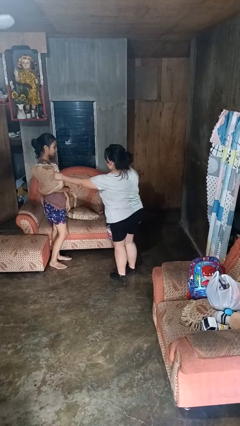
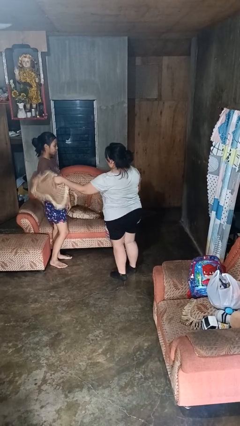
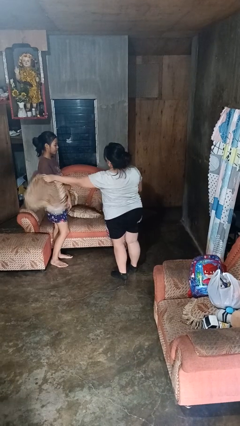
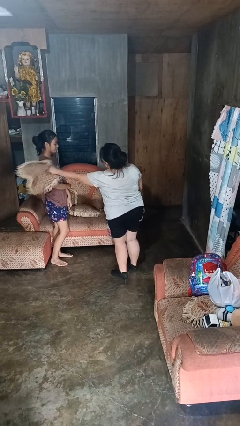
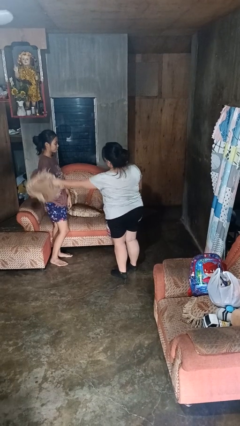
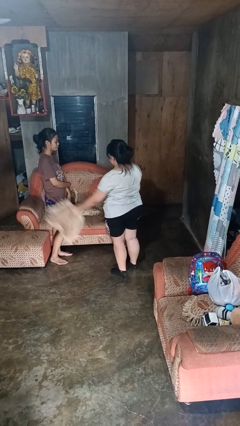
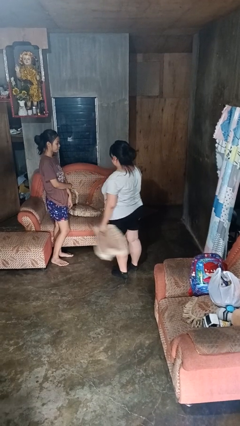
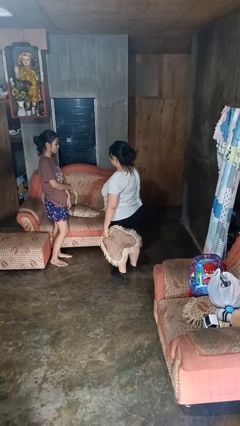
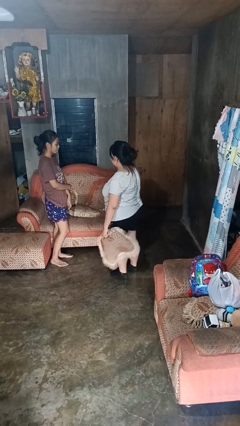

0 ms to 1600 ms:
person hits person with pillow

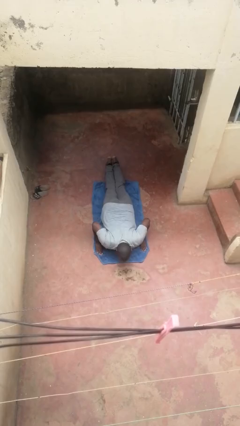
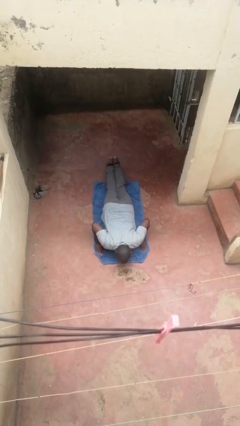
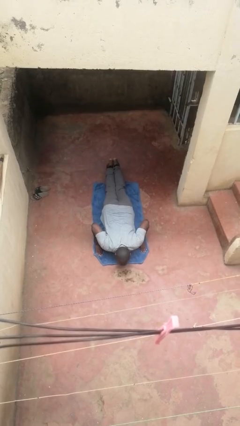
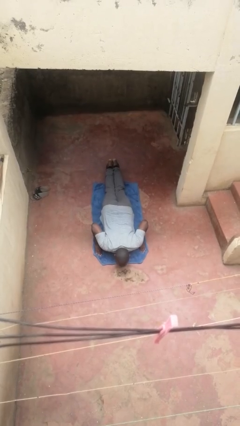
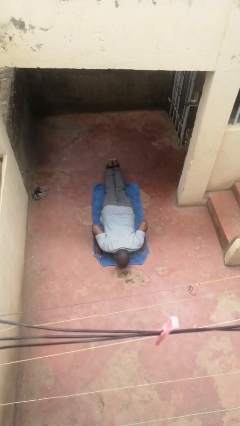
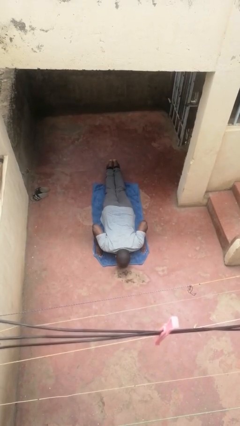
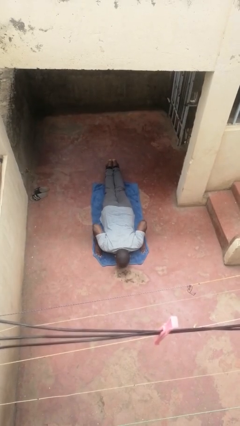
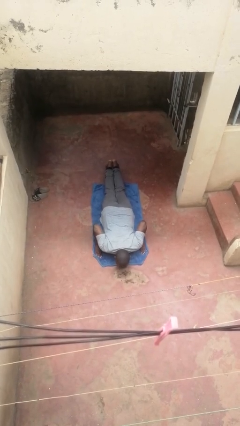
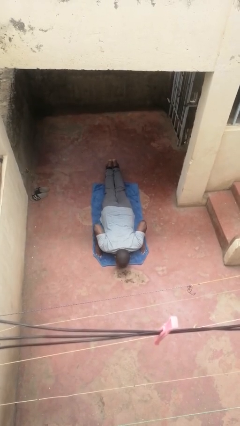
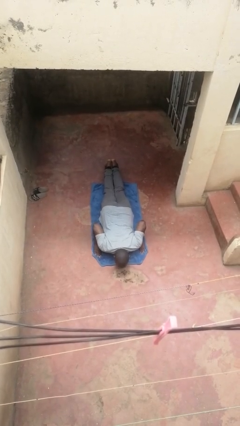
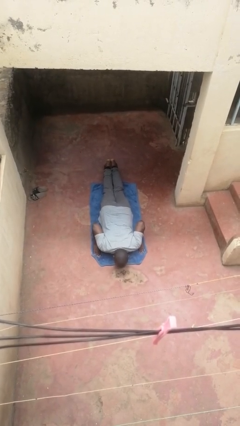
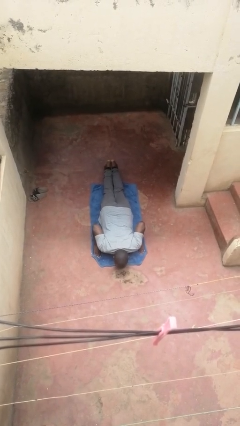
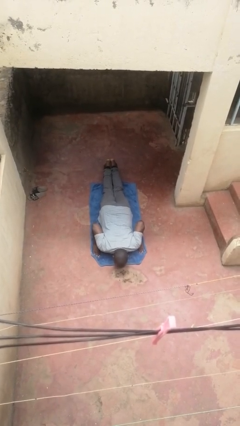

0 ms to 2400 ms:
person exercises with pushup

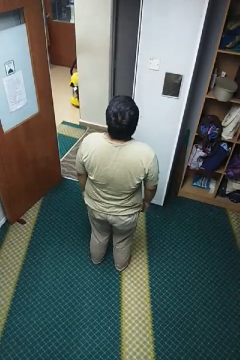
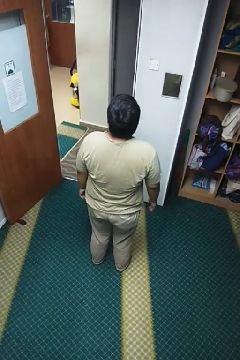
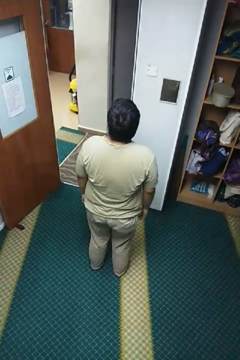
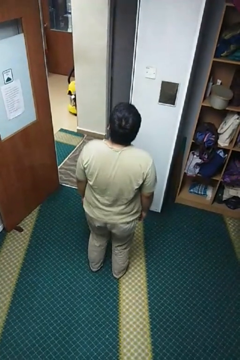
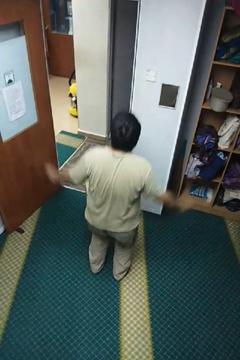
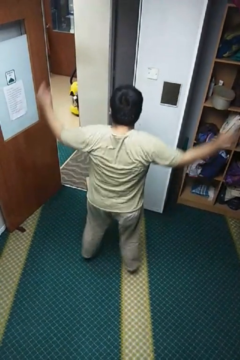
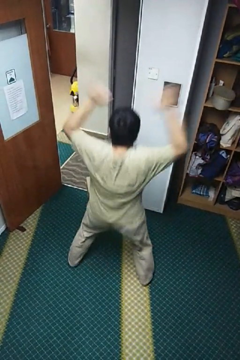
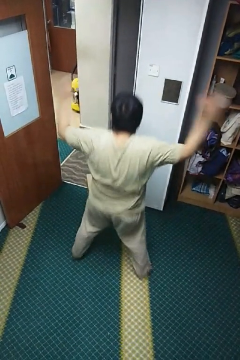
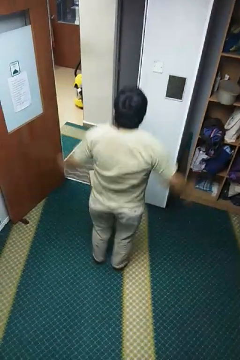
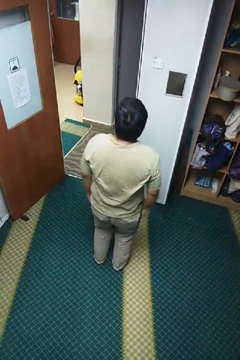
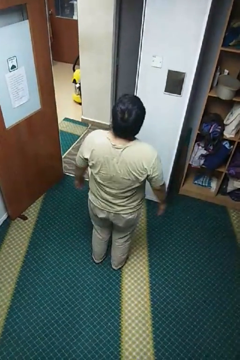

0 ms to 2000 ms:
person exercises with jumping jacks

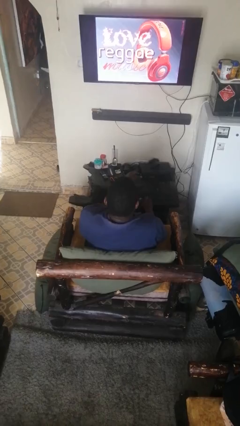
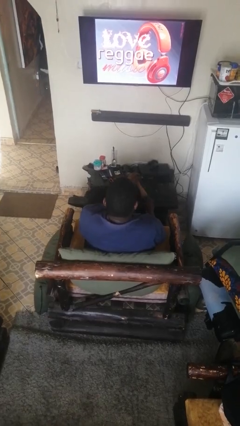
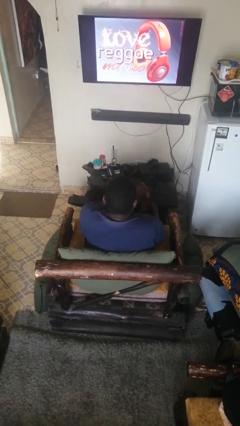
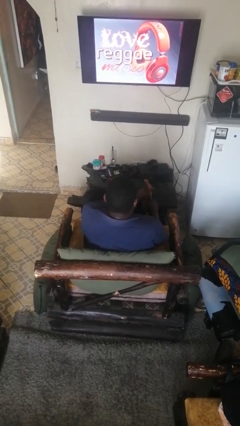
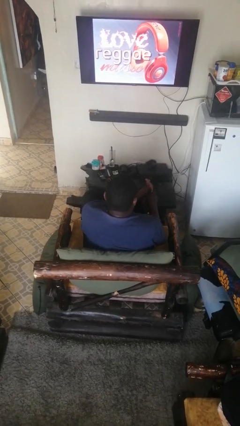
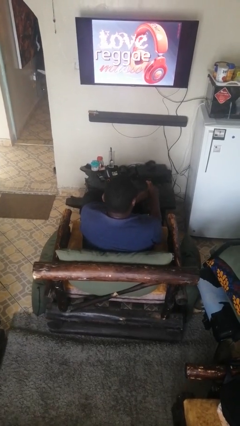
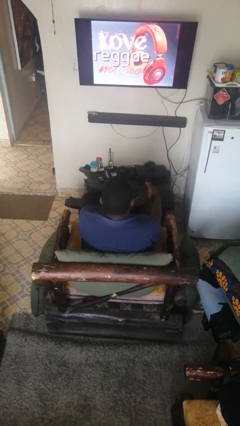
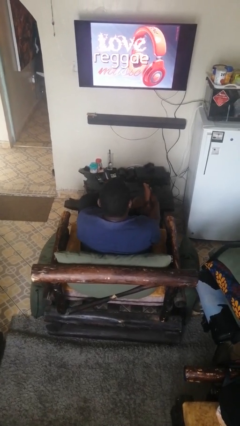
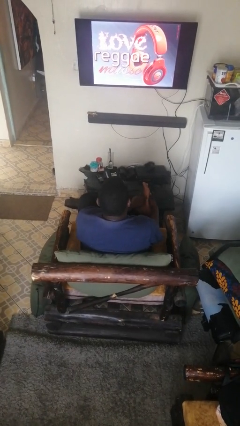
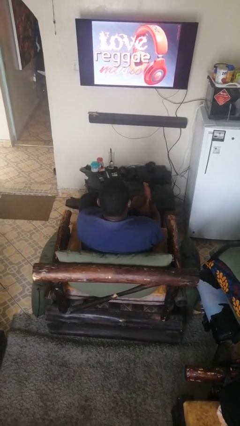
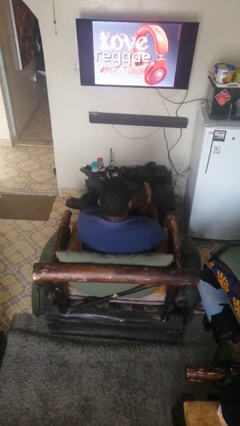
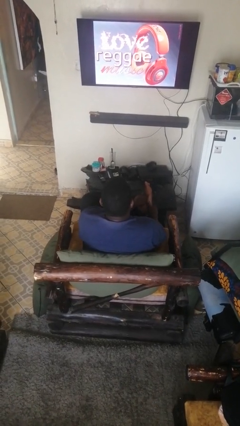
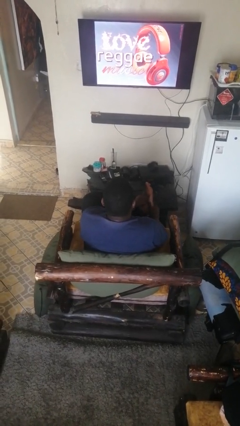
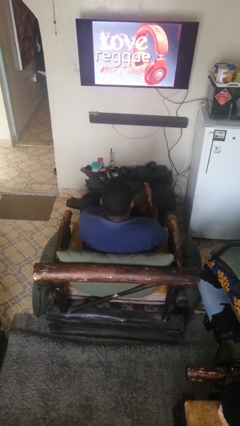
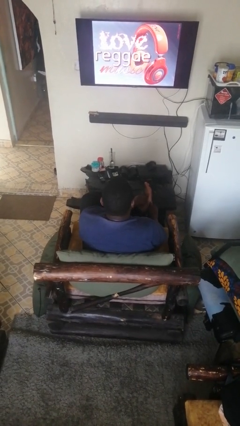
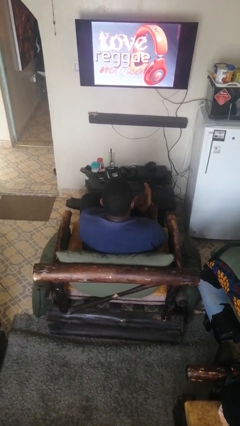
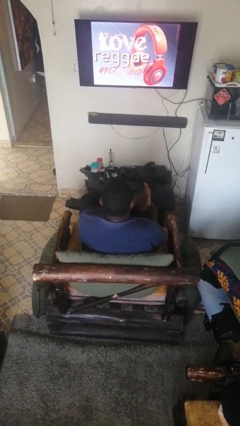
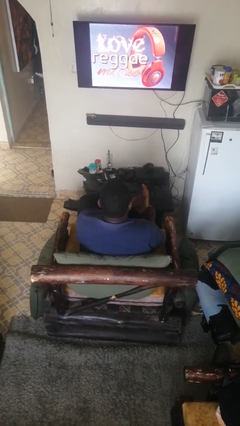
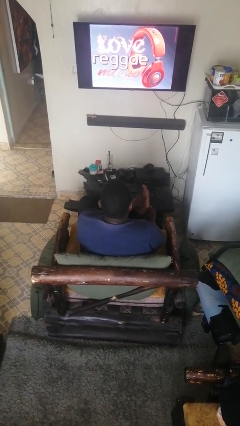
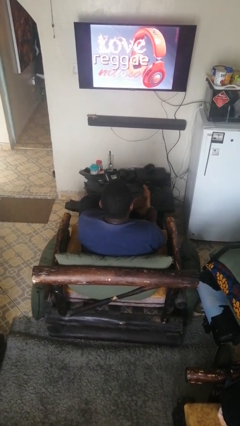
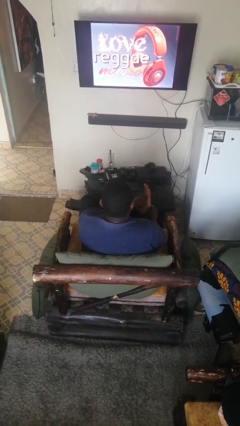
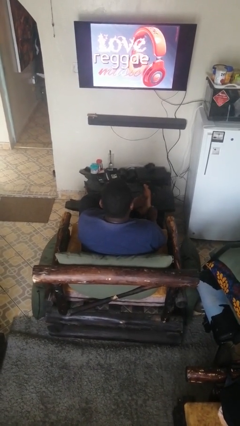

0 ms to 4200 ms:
person rubs foot

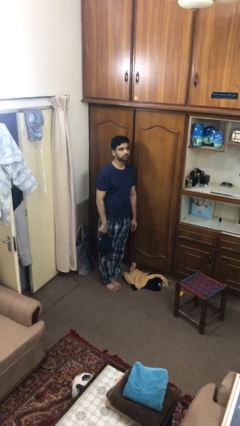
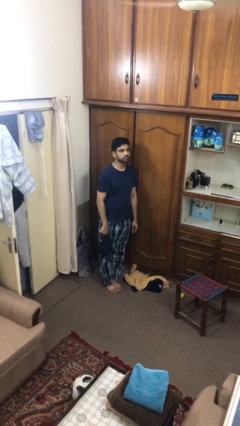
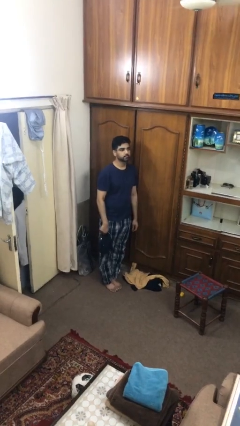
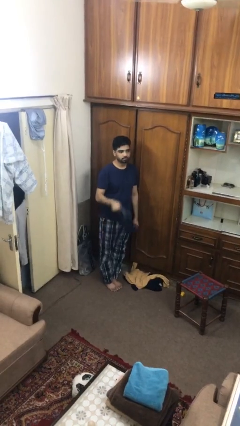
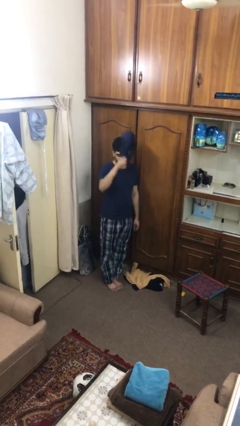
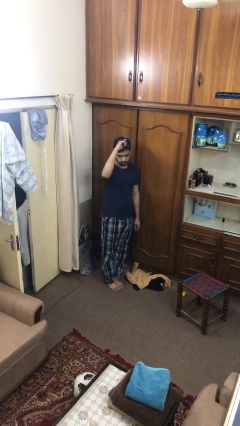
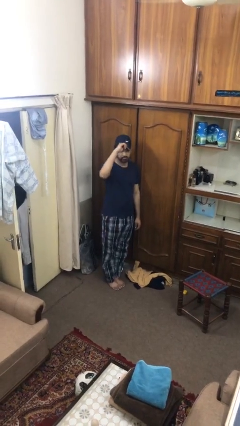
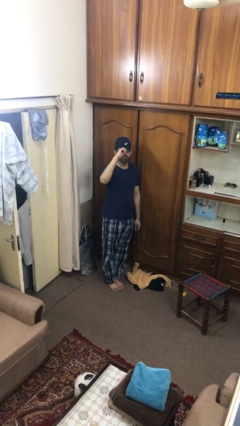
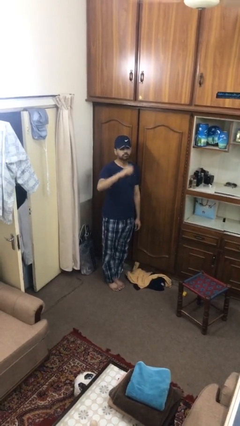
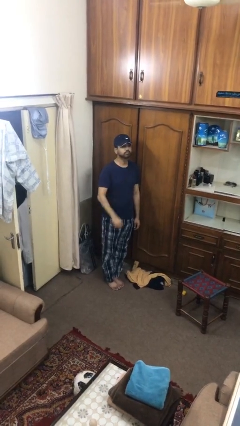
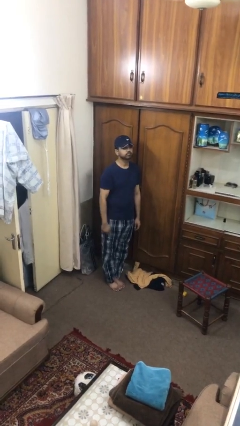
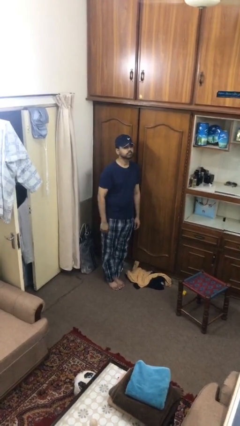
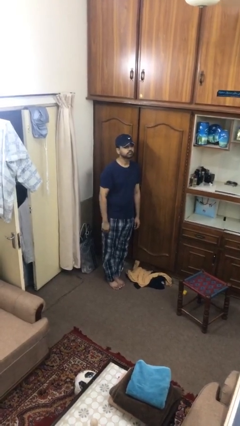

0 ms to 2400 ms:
person puts on hat

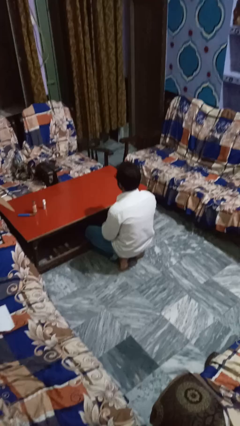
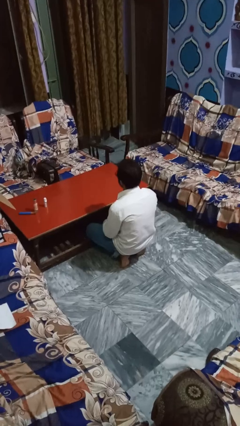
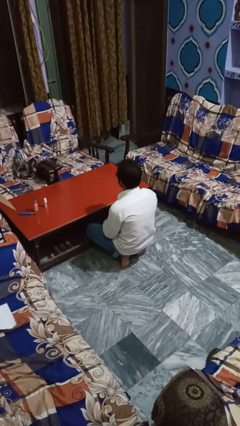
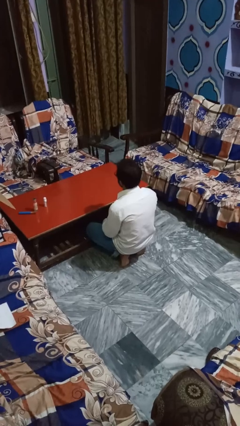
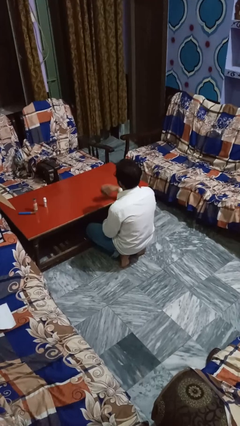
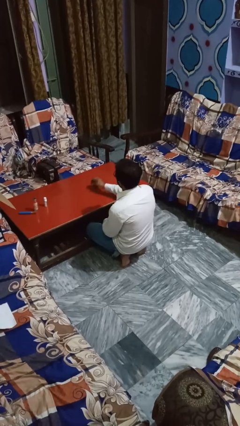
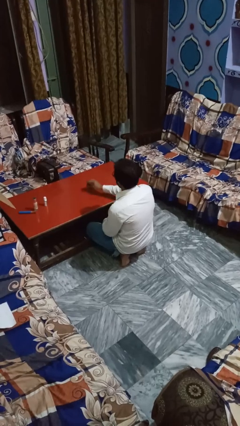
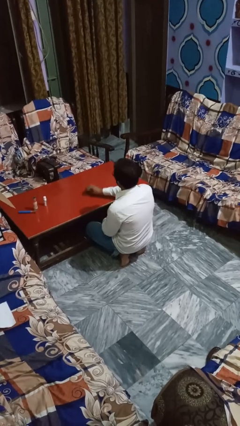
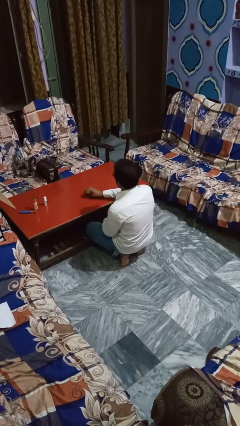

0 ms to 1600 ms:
person cleans table with rag

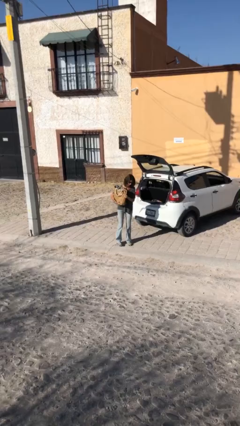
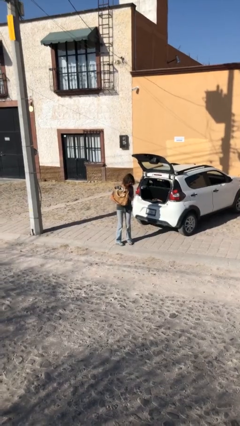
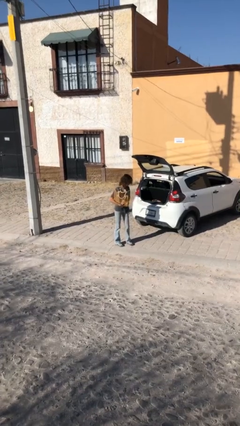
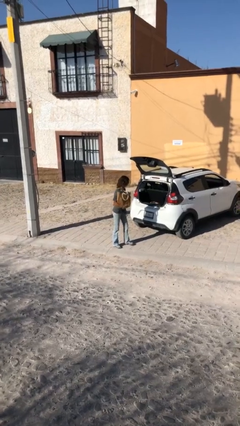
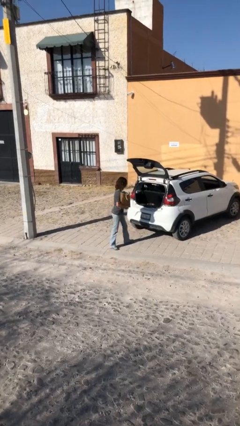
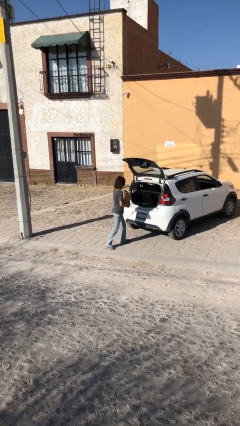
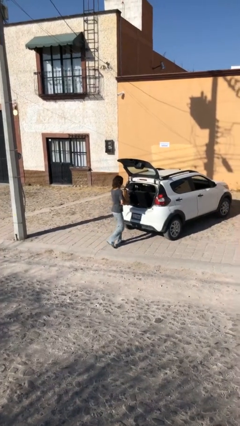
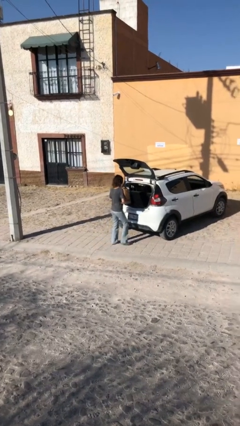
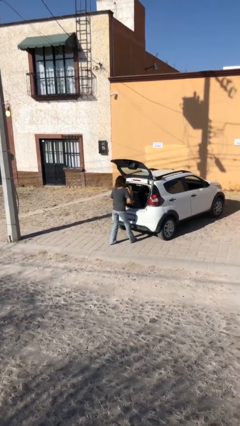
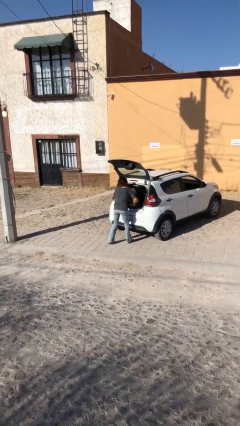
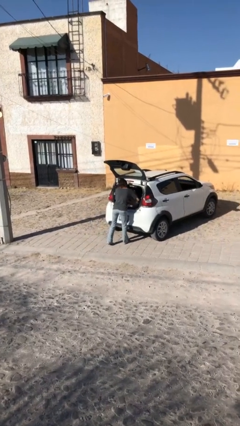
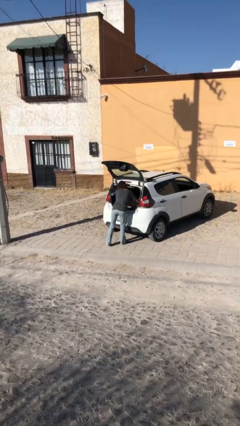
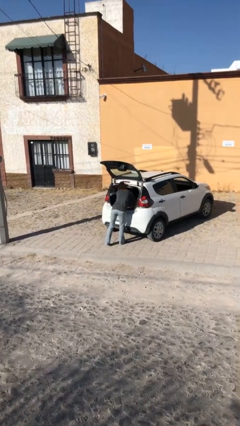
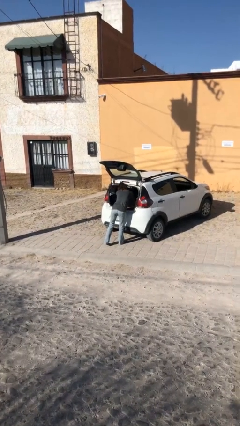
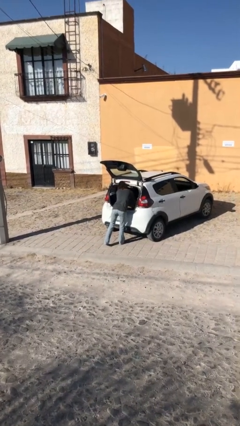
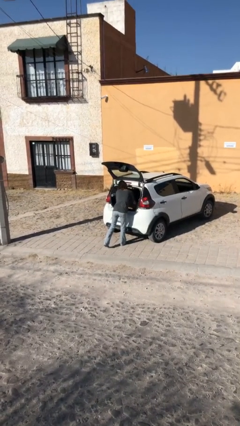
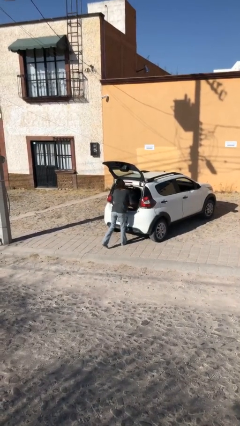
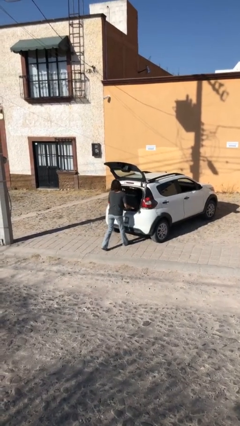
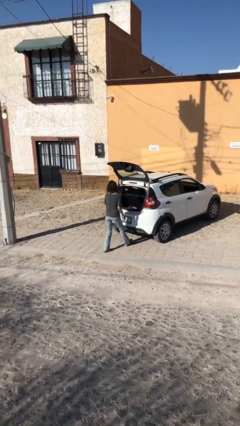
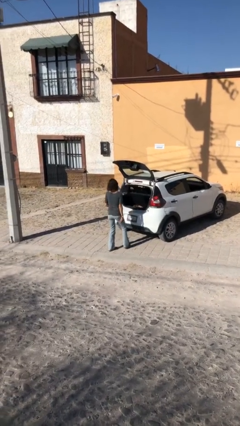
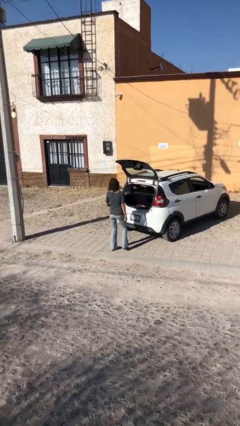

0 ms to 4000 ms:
person loads car
